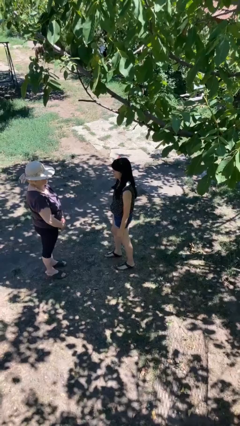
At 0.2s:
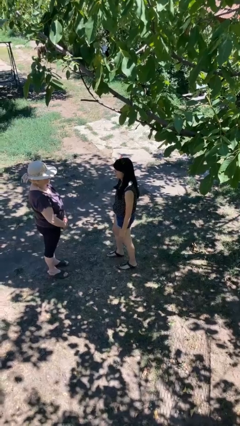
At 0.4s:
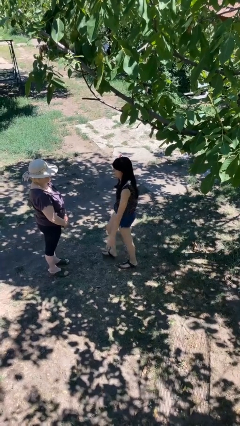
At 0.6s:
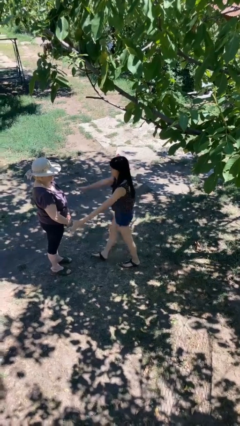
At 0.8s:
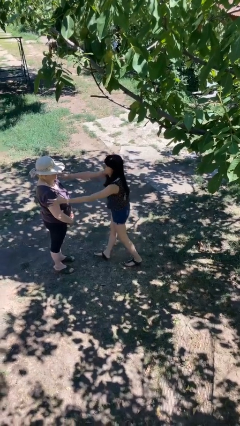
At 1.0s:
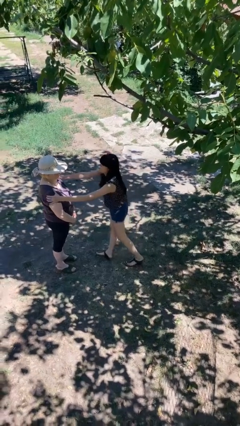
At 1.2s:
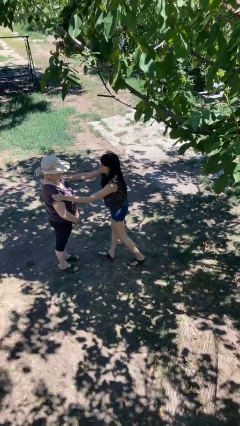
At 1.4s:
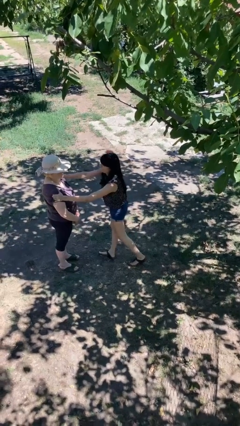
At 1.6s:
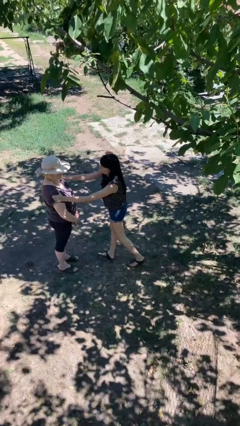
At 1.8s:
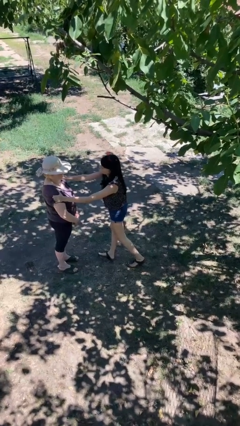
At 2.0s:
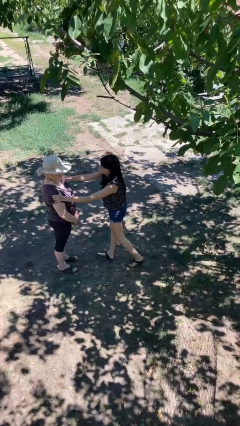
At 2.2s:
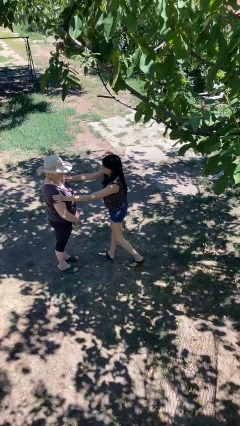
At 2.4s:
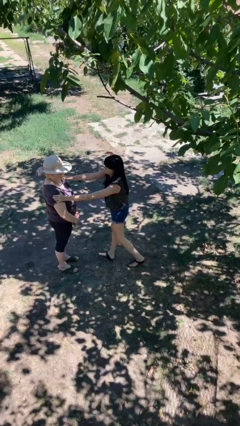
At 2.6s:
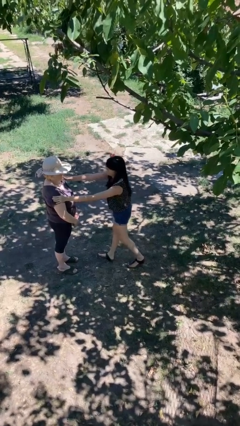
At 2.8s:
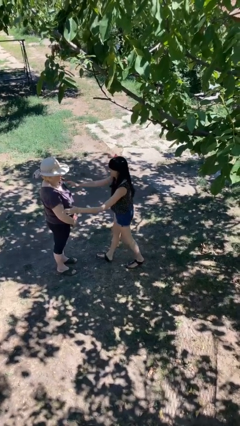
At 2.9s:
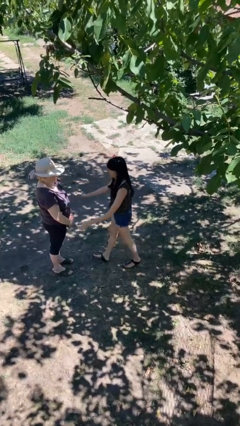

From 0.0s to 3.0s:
person grabs person by bicep

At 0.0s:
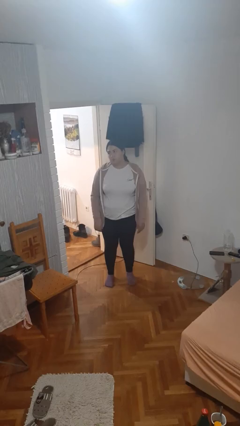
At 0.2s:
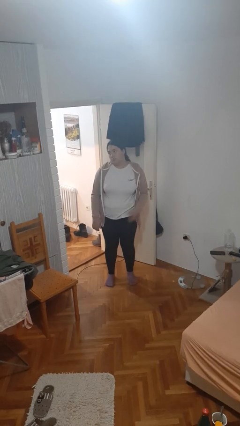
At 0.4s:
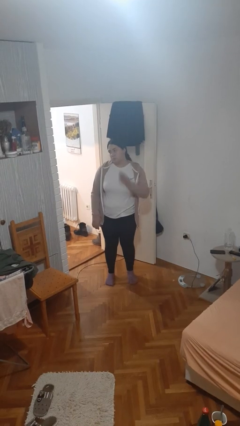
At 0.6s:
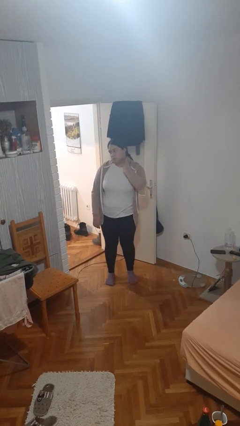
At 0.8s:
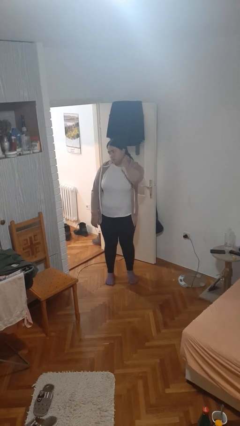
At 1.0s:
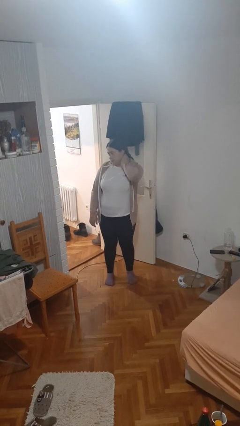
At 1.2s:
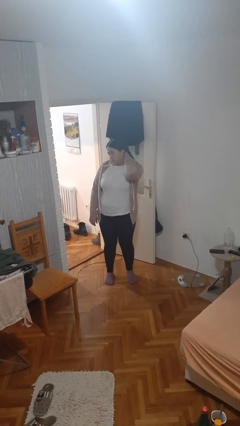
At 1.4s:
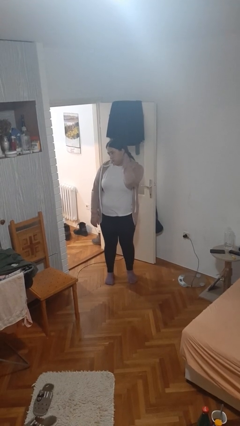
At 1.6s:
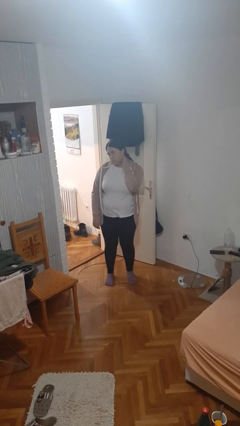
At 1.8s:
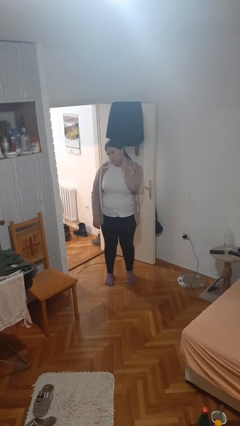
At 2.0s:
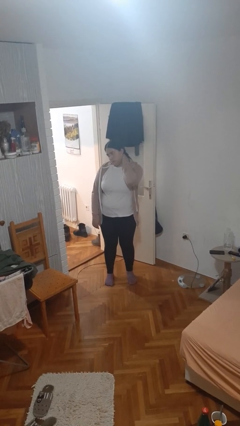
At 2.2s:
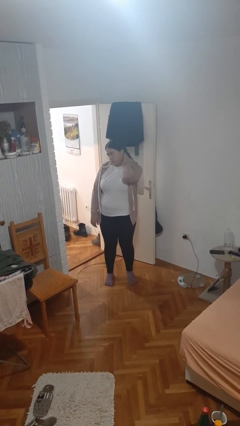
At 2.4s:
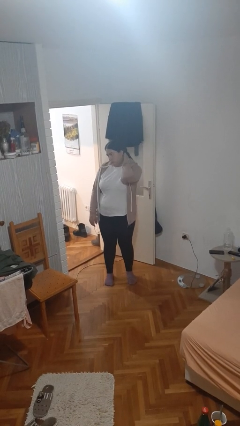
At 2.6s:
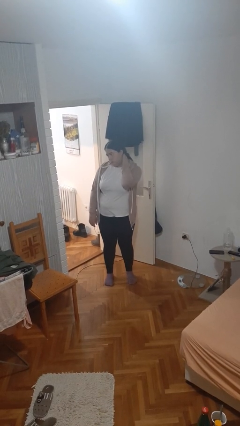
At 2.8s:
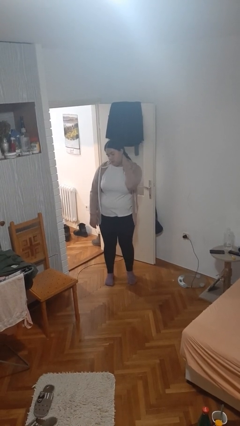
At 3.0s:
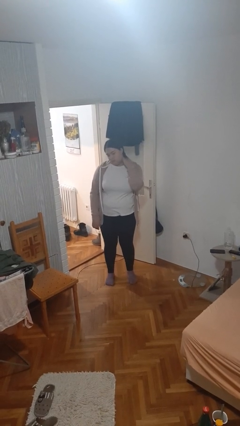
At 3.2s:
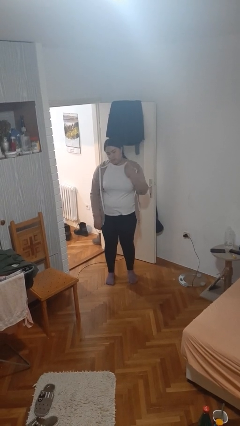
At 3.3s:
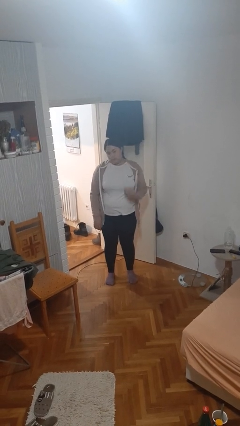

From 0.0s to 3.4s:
person rubs neck

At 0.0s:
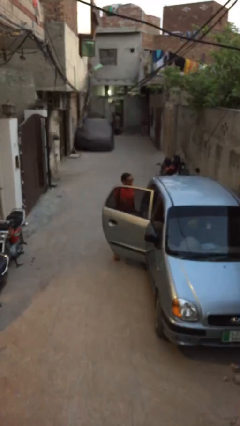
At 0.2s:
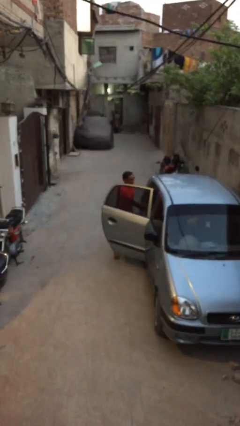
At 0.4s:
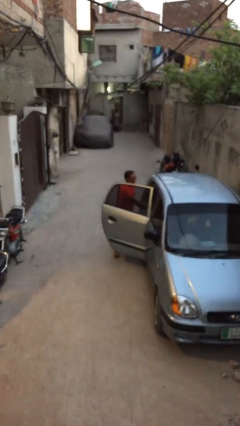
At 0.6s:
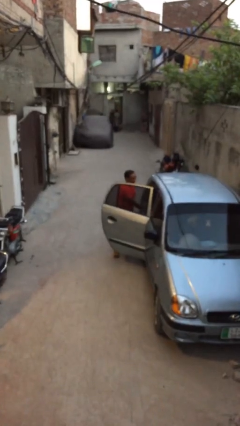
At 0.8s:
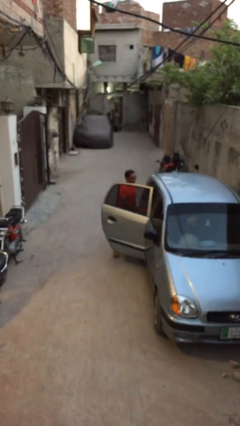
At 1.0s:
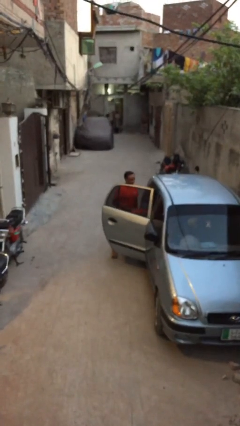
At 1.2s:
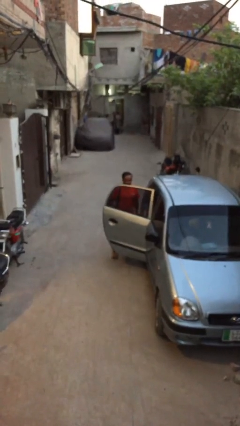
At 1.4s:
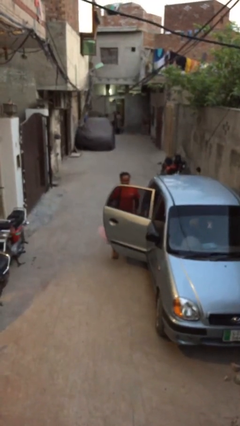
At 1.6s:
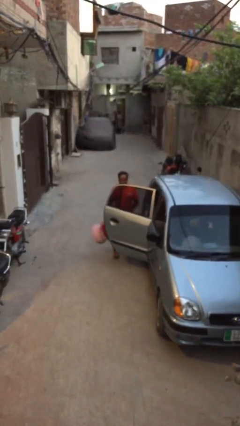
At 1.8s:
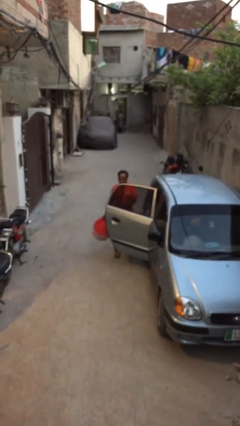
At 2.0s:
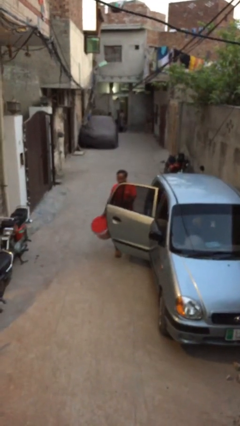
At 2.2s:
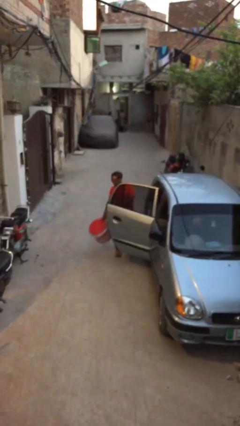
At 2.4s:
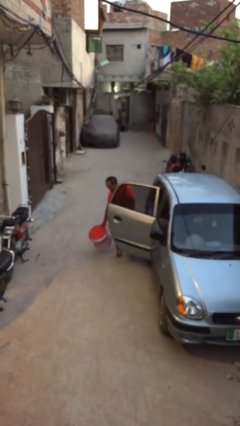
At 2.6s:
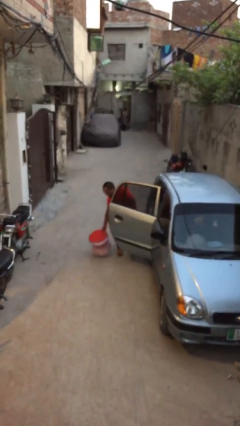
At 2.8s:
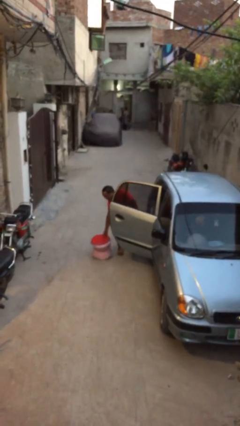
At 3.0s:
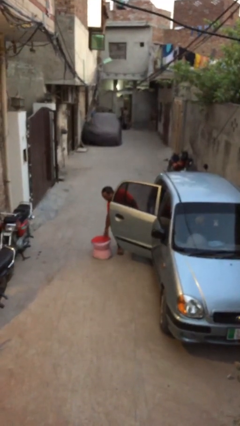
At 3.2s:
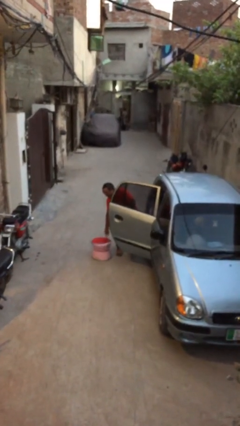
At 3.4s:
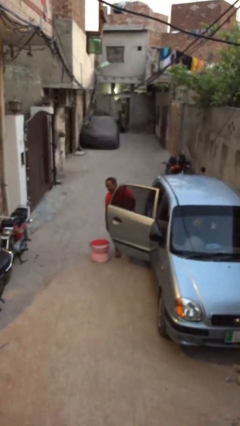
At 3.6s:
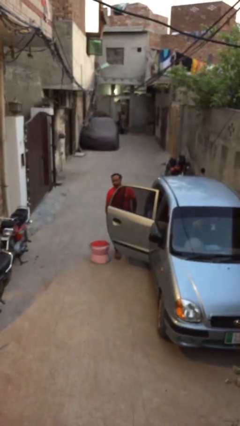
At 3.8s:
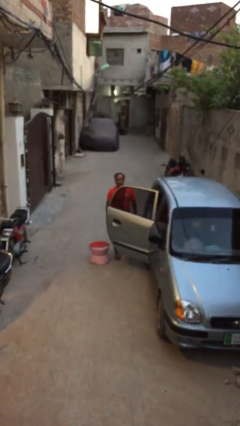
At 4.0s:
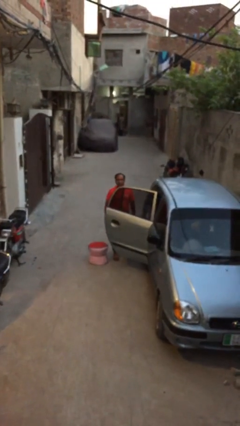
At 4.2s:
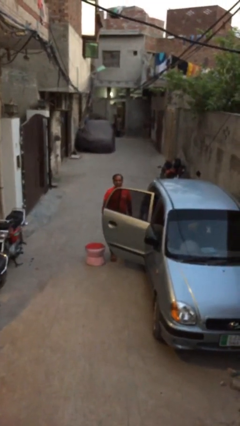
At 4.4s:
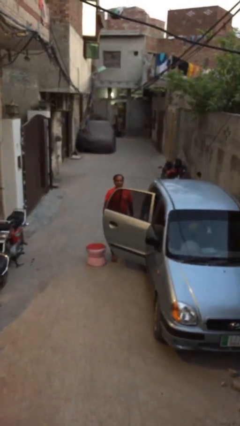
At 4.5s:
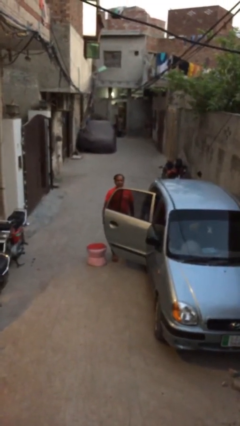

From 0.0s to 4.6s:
person unloads car

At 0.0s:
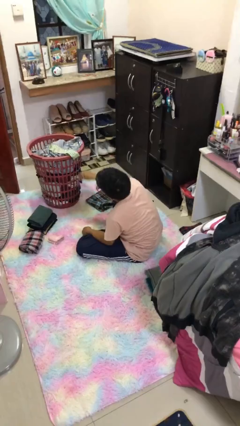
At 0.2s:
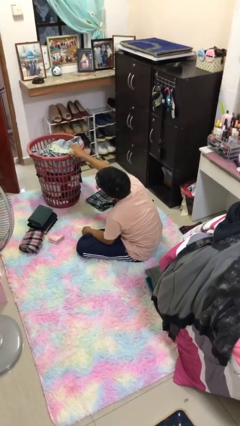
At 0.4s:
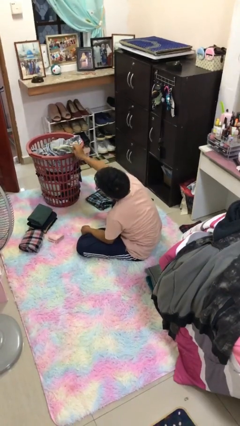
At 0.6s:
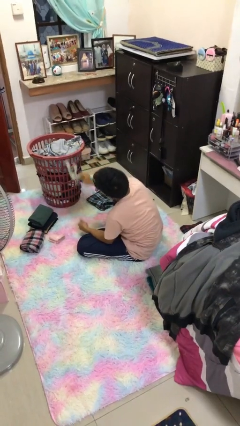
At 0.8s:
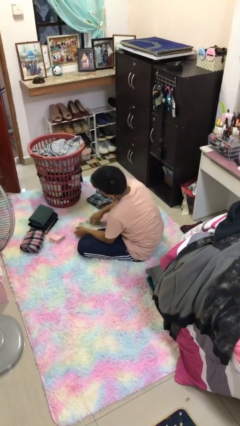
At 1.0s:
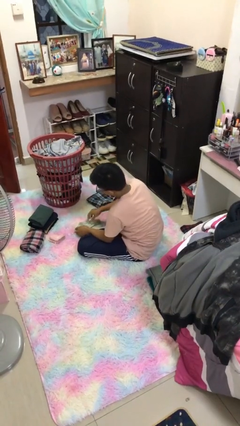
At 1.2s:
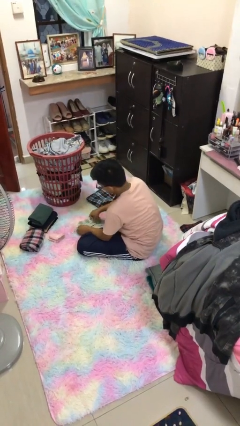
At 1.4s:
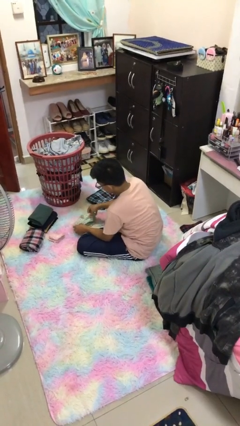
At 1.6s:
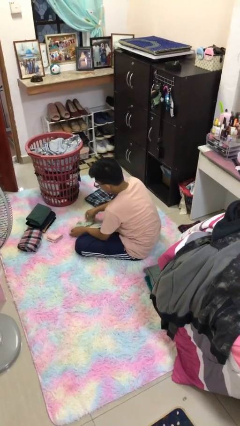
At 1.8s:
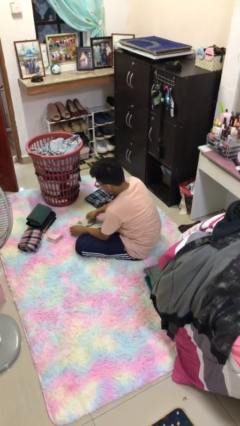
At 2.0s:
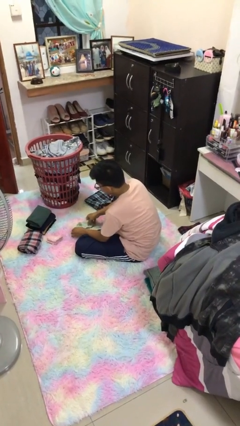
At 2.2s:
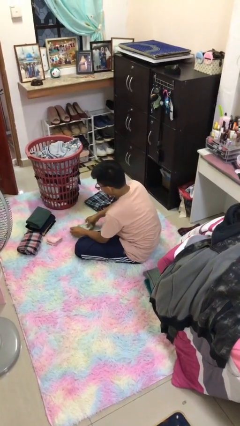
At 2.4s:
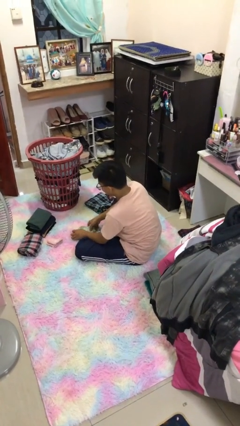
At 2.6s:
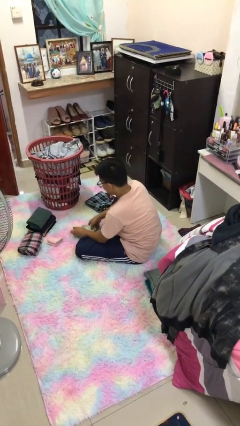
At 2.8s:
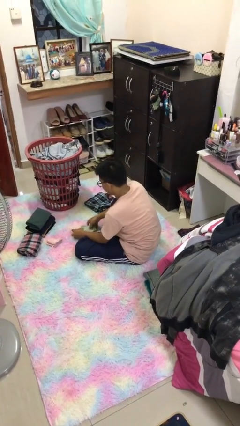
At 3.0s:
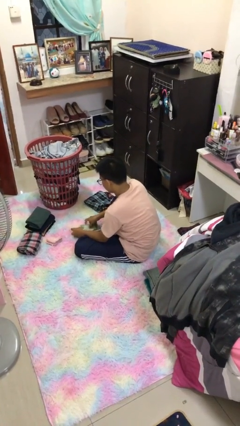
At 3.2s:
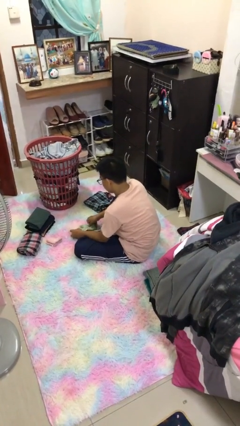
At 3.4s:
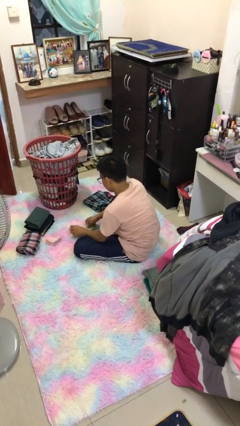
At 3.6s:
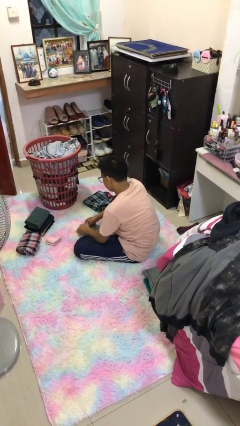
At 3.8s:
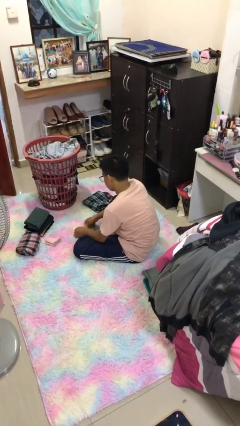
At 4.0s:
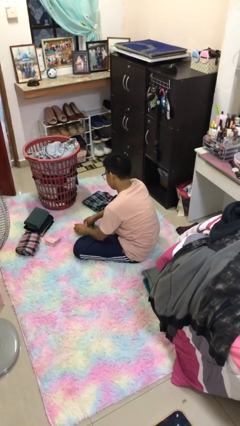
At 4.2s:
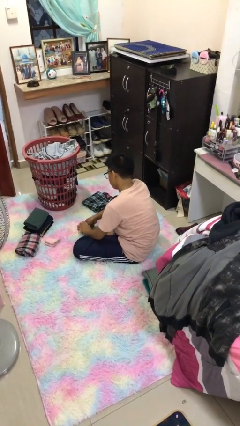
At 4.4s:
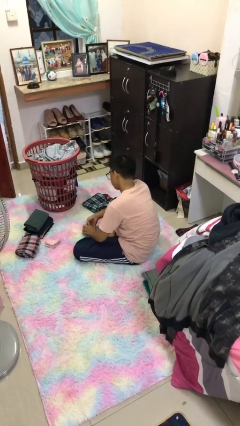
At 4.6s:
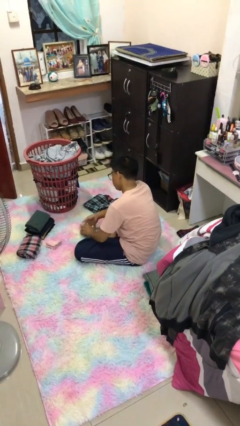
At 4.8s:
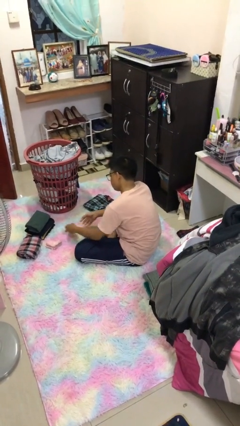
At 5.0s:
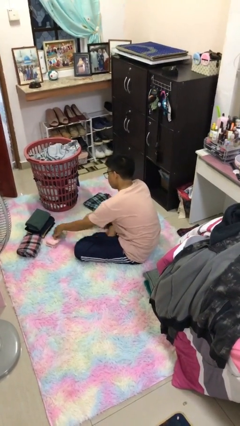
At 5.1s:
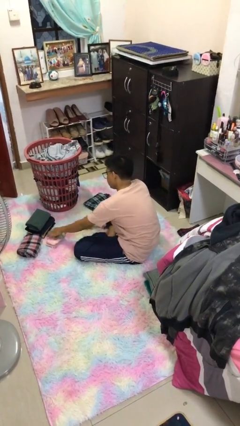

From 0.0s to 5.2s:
person folds socks

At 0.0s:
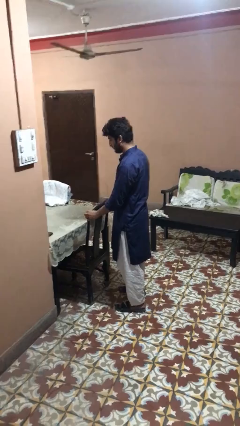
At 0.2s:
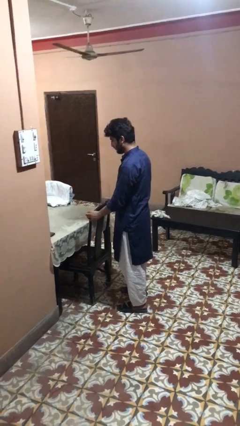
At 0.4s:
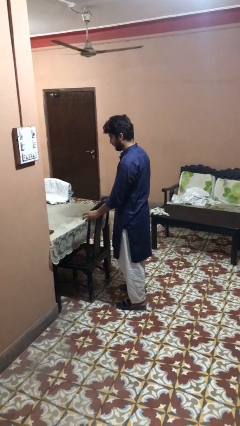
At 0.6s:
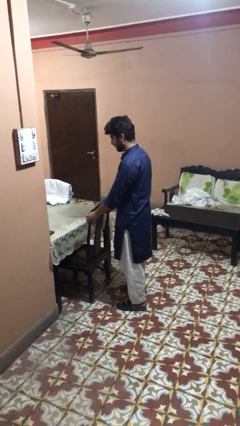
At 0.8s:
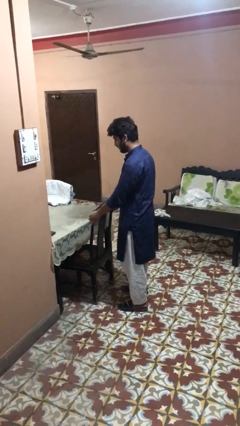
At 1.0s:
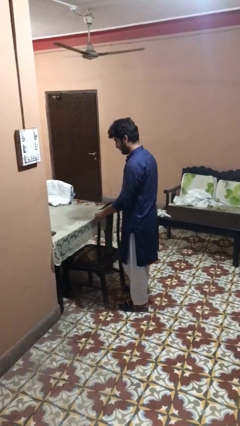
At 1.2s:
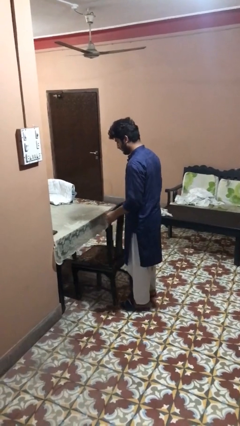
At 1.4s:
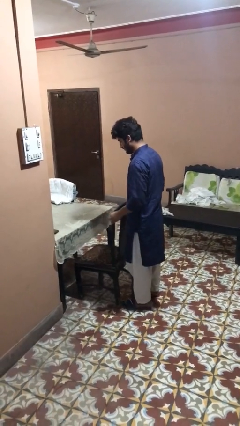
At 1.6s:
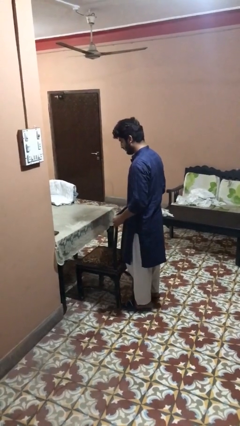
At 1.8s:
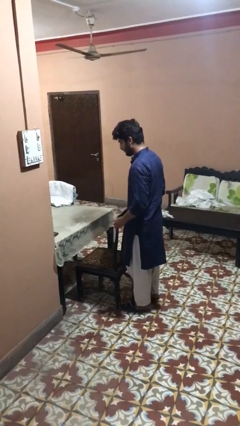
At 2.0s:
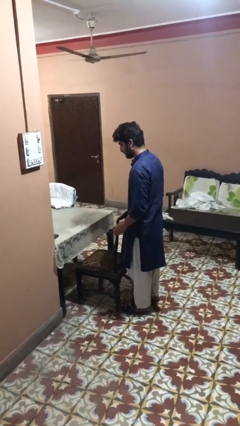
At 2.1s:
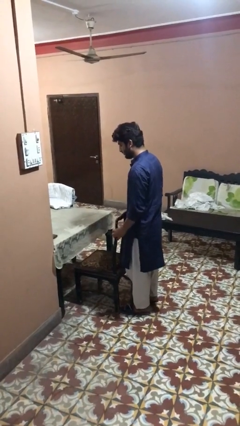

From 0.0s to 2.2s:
person pulls out chair
